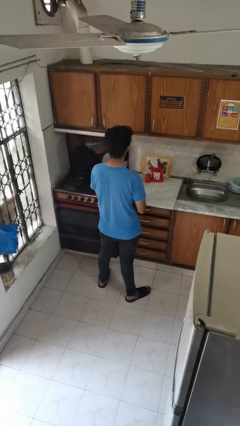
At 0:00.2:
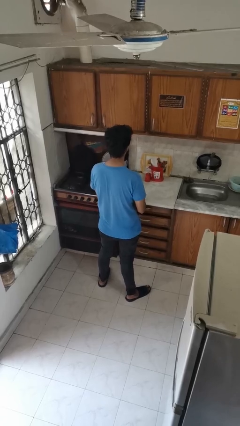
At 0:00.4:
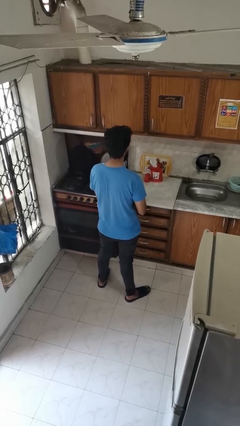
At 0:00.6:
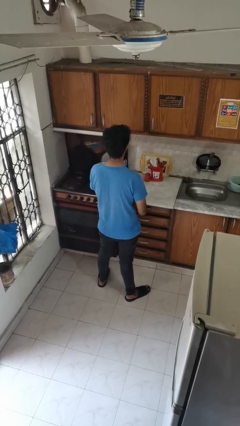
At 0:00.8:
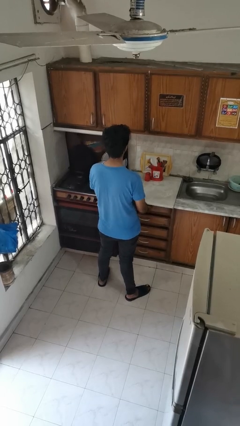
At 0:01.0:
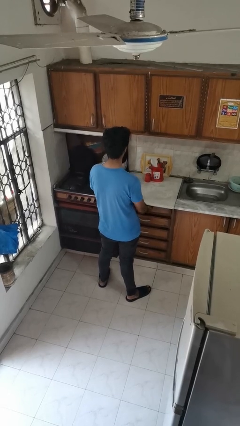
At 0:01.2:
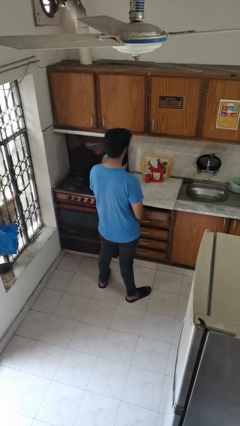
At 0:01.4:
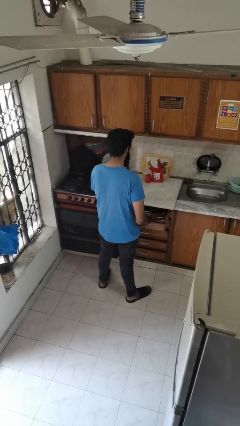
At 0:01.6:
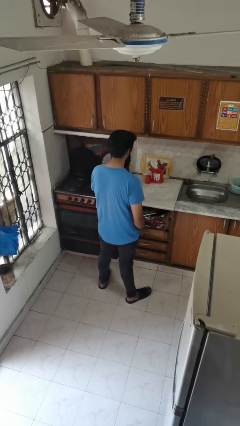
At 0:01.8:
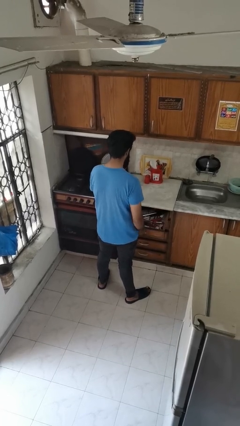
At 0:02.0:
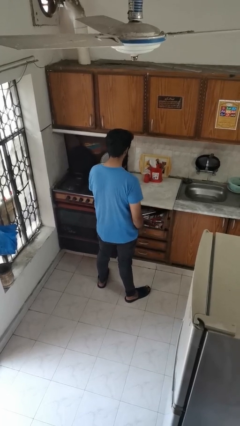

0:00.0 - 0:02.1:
person opens kitchen drawer

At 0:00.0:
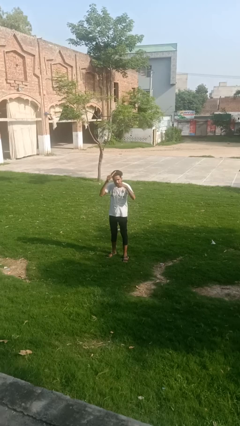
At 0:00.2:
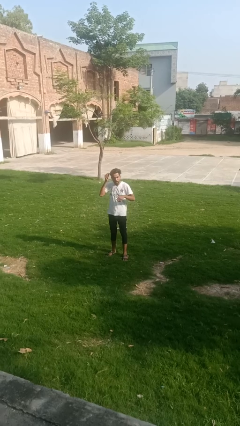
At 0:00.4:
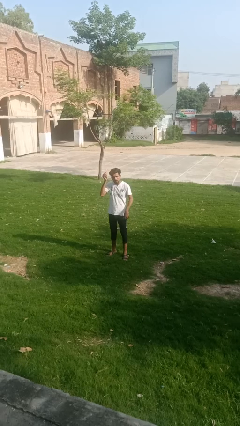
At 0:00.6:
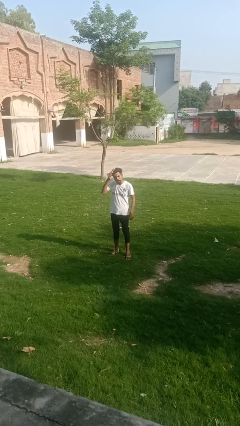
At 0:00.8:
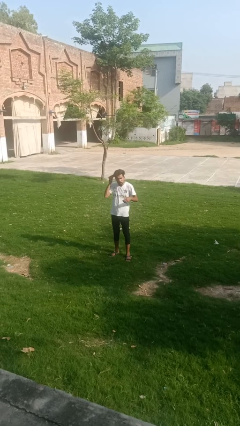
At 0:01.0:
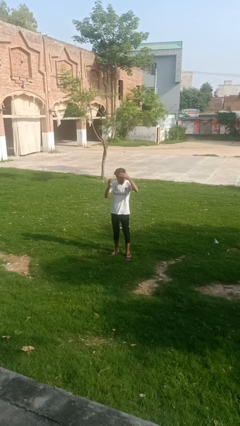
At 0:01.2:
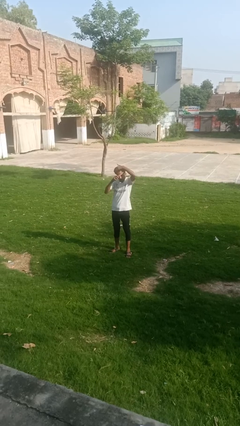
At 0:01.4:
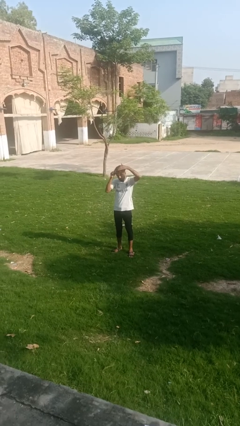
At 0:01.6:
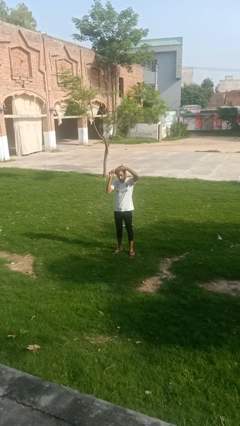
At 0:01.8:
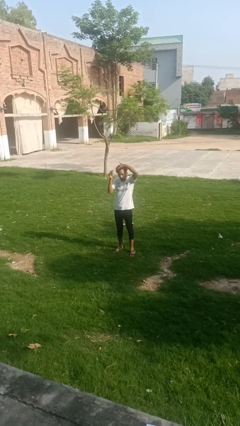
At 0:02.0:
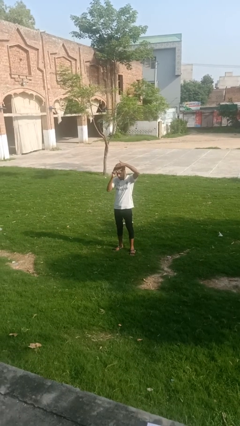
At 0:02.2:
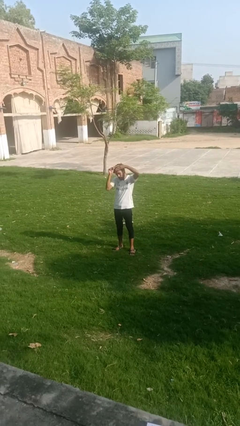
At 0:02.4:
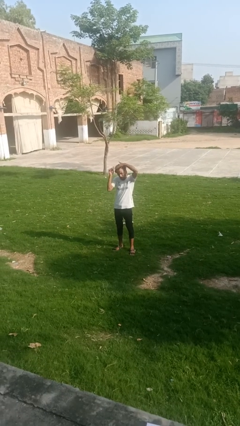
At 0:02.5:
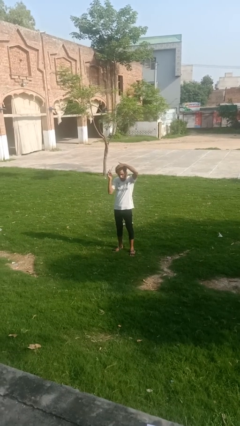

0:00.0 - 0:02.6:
person brushes hair

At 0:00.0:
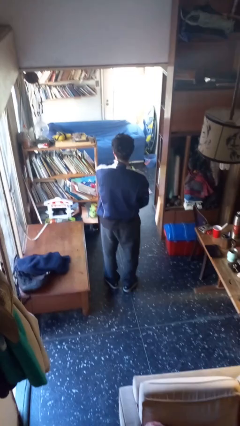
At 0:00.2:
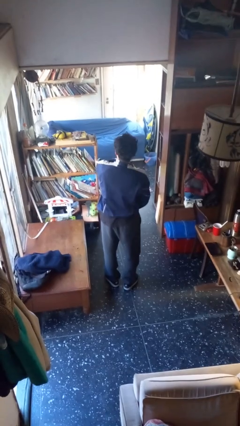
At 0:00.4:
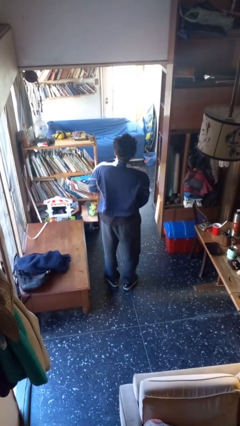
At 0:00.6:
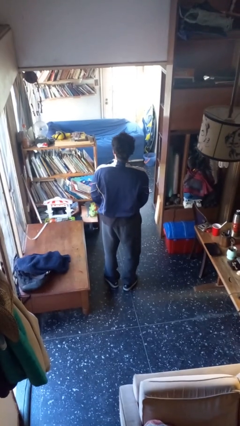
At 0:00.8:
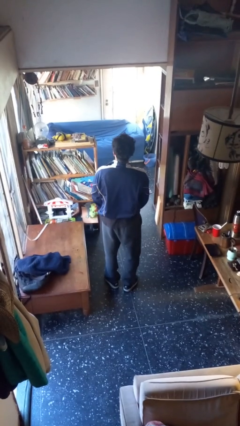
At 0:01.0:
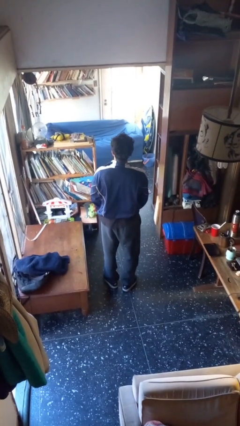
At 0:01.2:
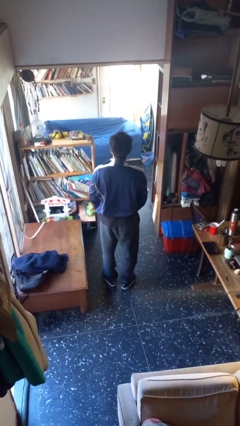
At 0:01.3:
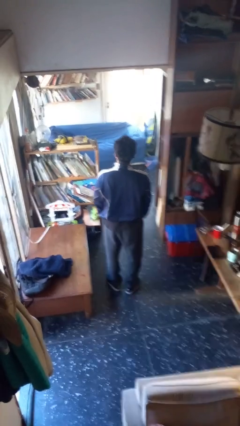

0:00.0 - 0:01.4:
person unzips jacket

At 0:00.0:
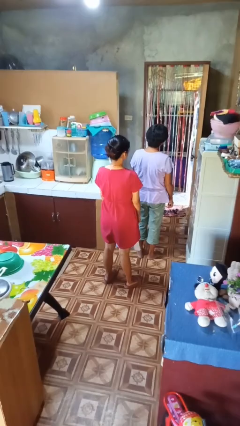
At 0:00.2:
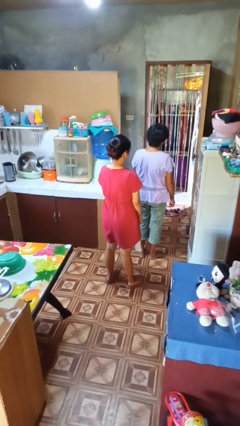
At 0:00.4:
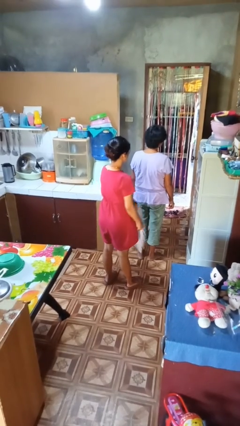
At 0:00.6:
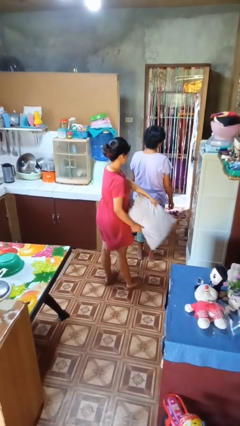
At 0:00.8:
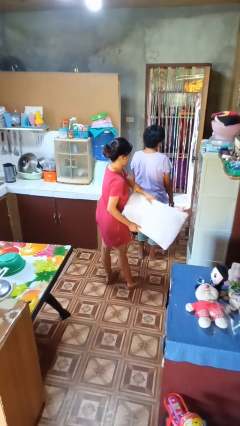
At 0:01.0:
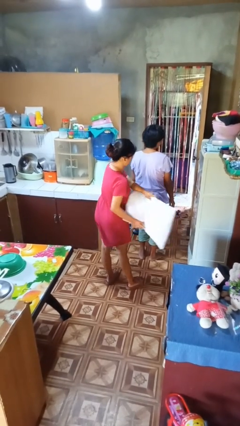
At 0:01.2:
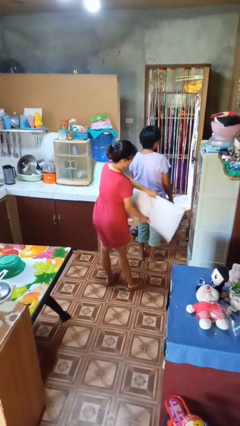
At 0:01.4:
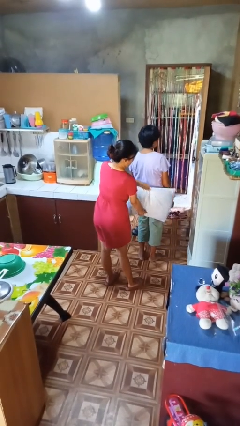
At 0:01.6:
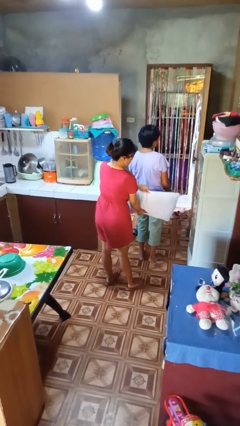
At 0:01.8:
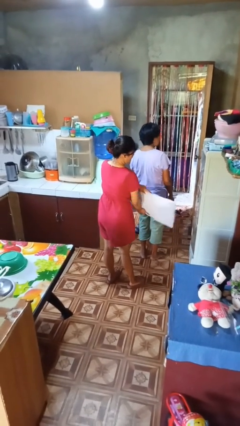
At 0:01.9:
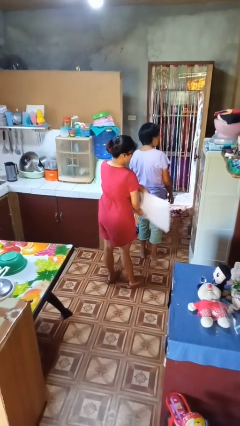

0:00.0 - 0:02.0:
person hits person with pillow

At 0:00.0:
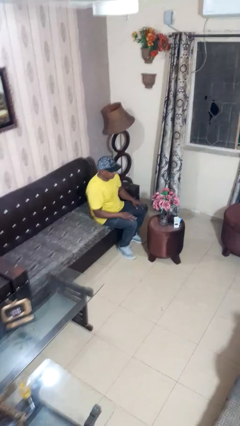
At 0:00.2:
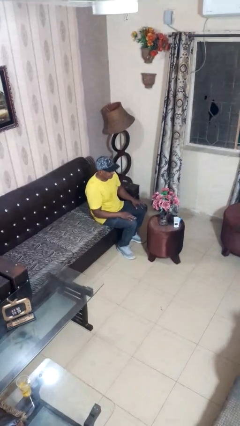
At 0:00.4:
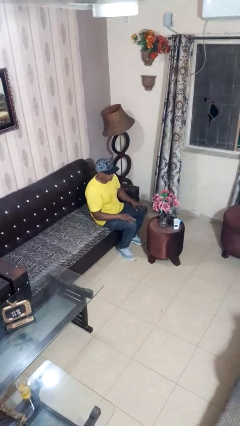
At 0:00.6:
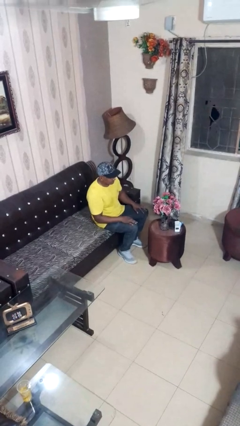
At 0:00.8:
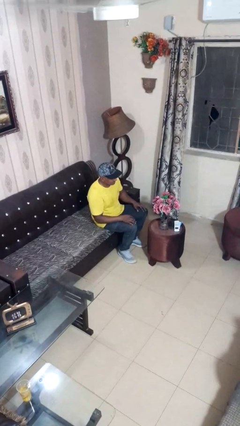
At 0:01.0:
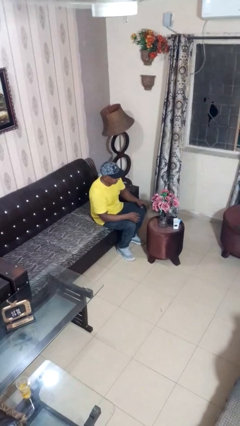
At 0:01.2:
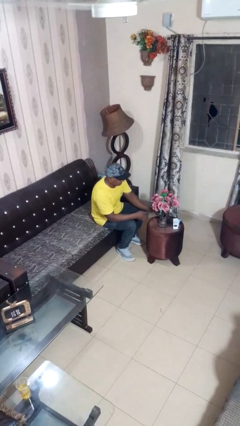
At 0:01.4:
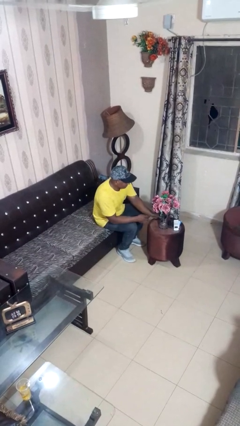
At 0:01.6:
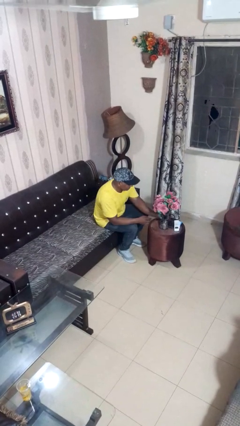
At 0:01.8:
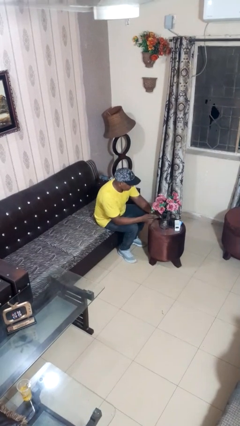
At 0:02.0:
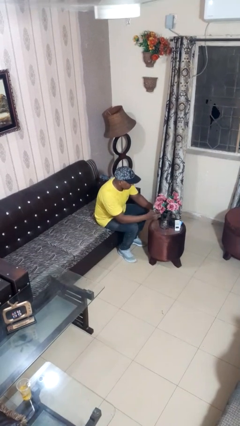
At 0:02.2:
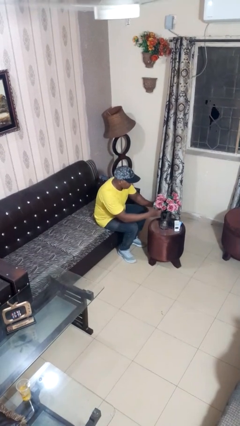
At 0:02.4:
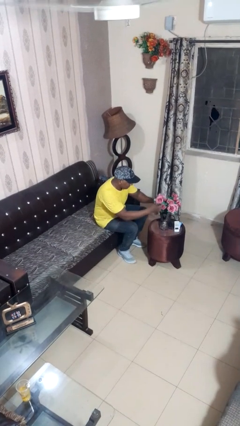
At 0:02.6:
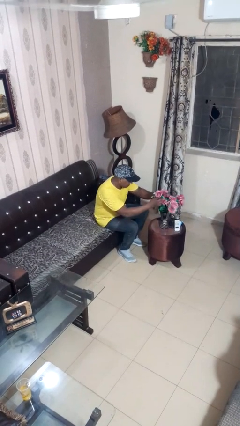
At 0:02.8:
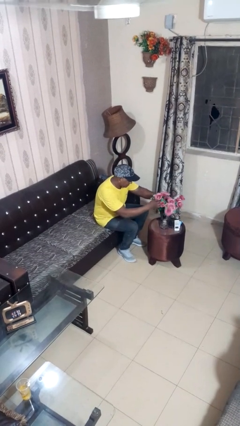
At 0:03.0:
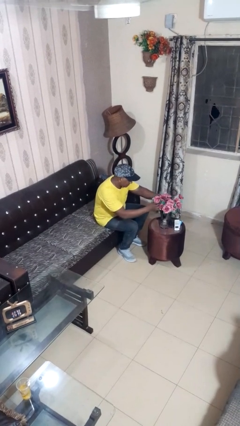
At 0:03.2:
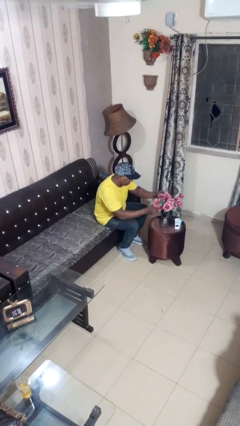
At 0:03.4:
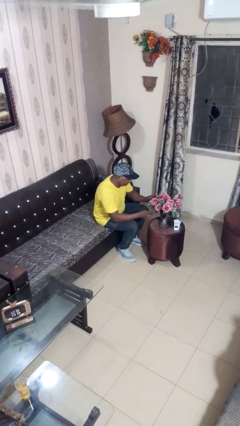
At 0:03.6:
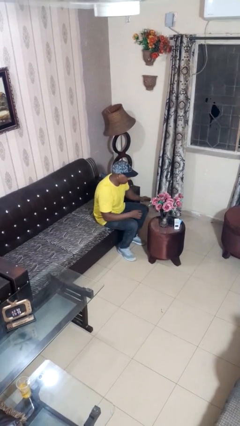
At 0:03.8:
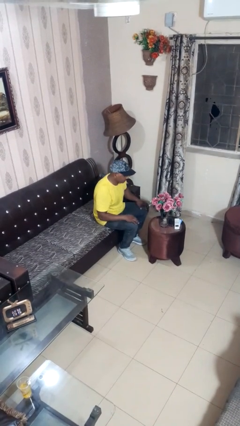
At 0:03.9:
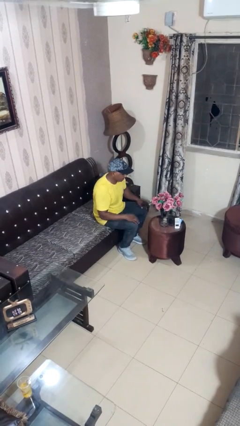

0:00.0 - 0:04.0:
person arranges flowers in vase

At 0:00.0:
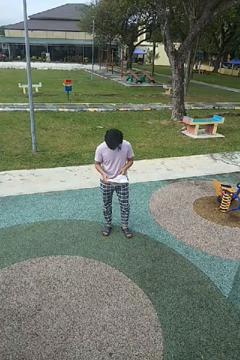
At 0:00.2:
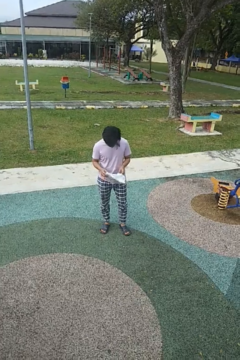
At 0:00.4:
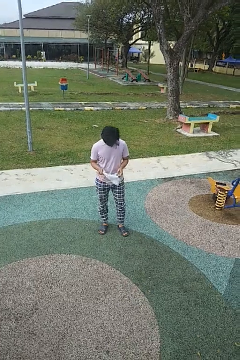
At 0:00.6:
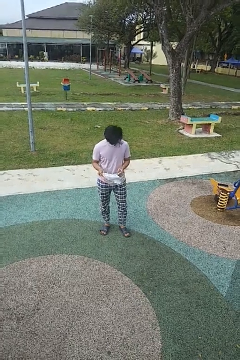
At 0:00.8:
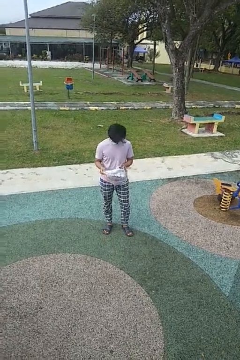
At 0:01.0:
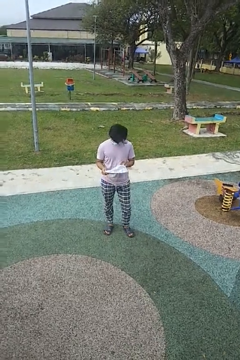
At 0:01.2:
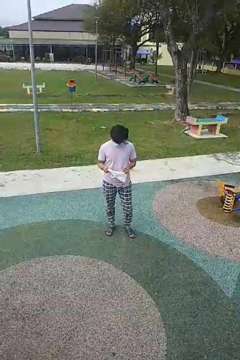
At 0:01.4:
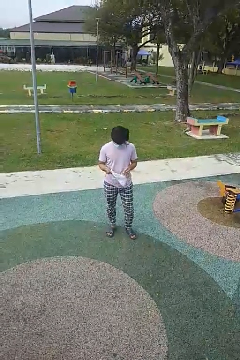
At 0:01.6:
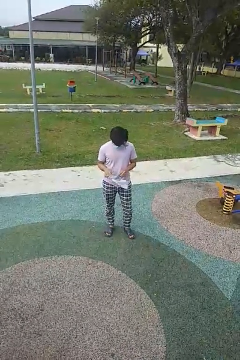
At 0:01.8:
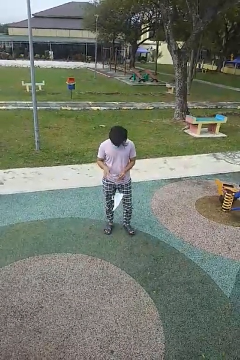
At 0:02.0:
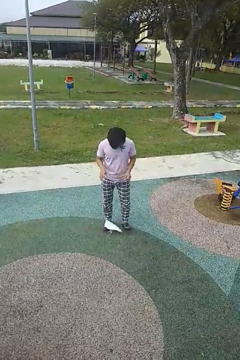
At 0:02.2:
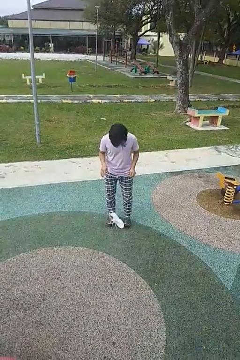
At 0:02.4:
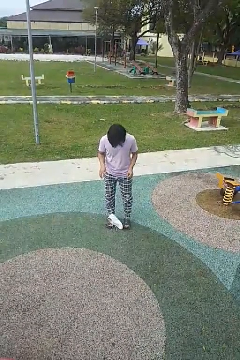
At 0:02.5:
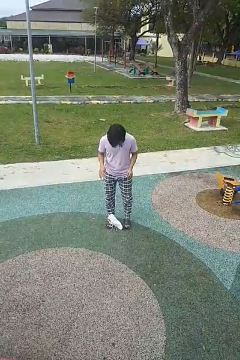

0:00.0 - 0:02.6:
person drops object

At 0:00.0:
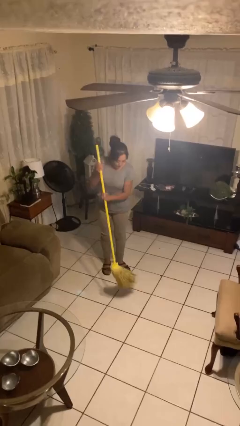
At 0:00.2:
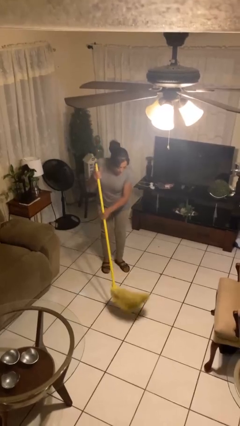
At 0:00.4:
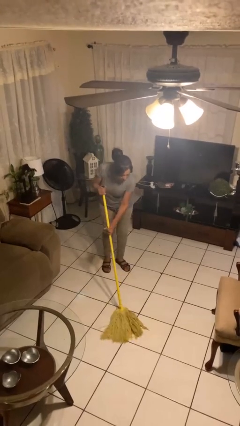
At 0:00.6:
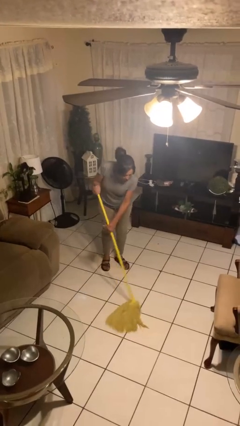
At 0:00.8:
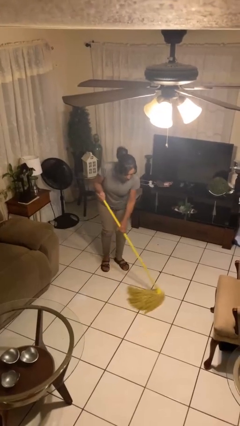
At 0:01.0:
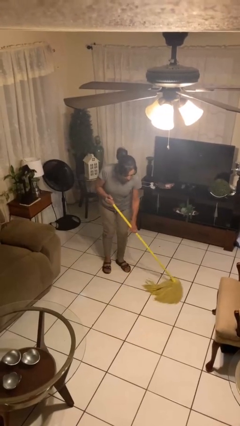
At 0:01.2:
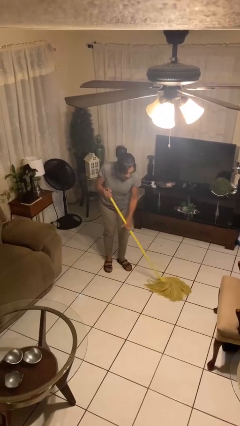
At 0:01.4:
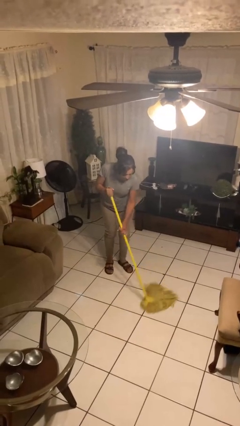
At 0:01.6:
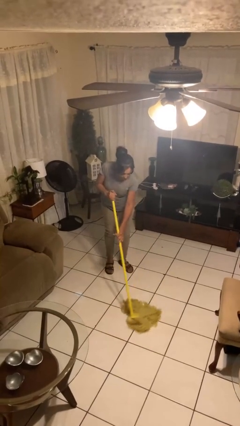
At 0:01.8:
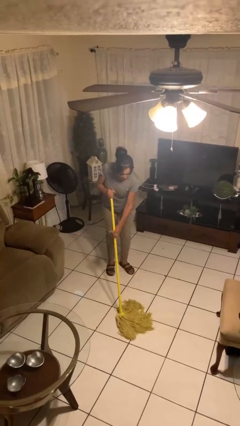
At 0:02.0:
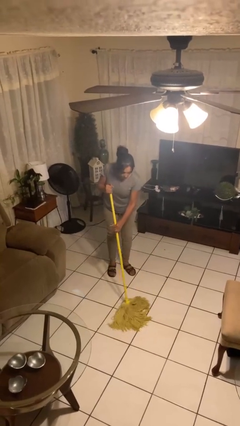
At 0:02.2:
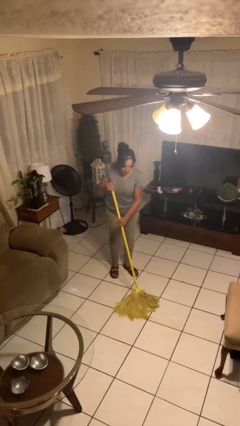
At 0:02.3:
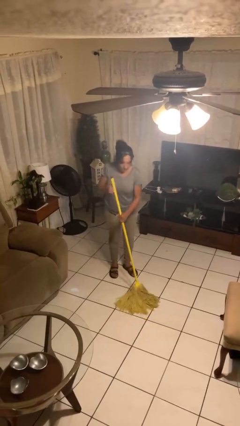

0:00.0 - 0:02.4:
person mops

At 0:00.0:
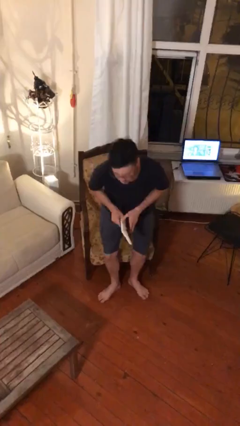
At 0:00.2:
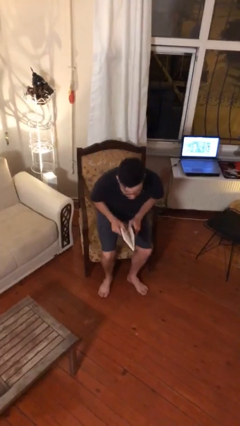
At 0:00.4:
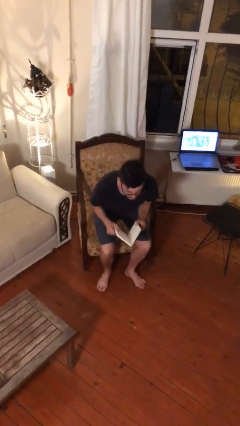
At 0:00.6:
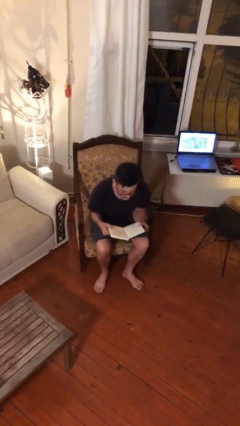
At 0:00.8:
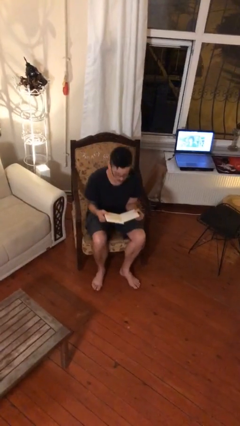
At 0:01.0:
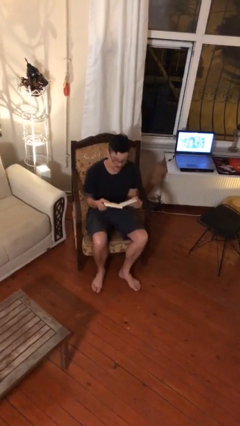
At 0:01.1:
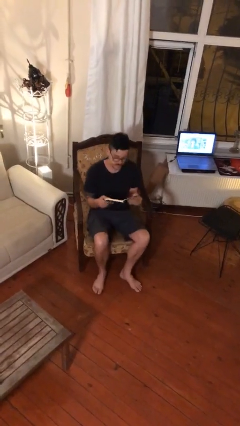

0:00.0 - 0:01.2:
person sits down
